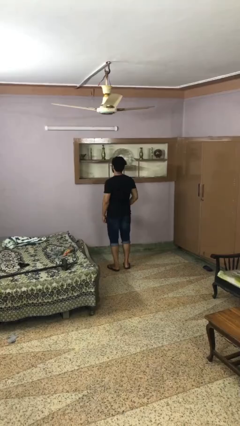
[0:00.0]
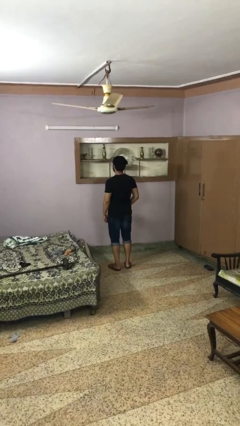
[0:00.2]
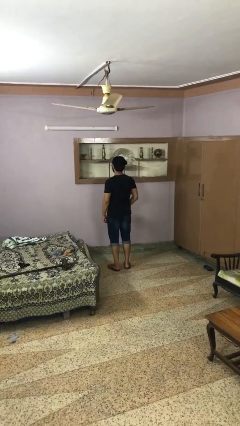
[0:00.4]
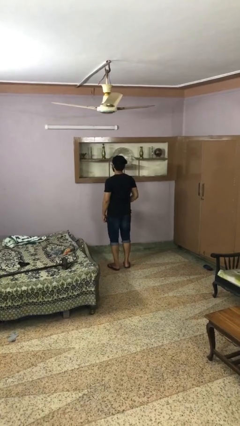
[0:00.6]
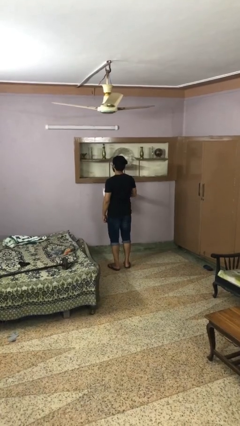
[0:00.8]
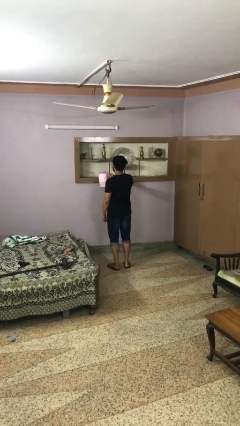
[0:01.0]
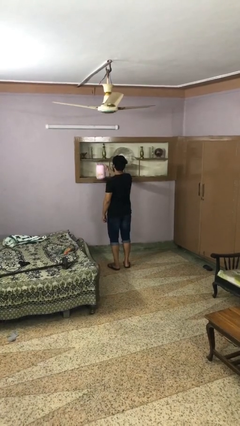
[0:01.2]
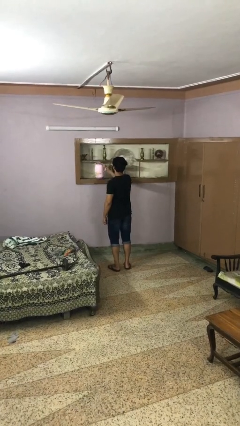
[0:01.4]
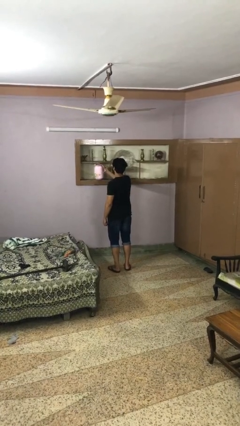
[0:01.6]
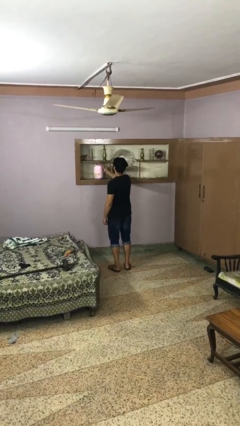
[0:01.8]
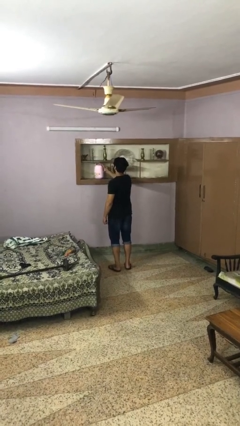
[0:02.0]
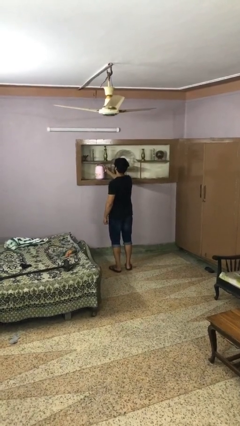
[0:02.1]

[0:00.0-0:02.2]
person puts down object on countertop

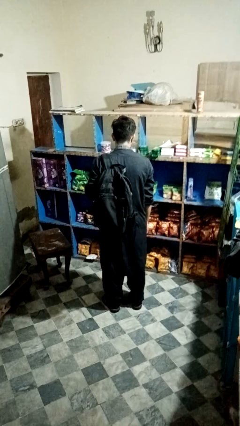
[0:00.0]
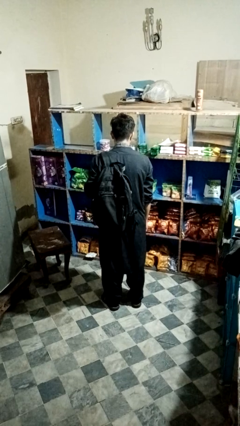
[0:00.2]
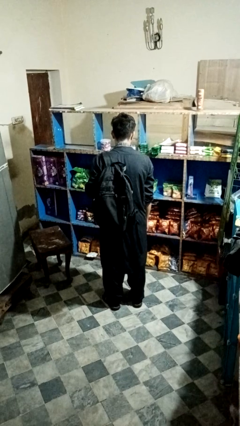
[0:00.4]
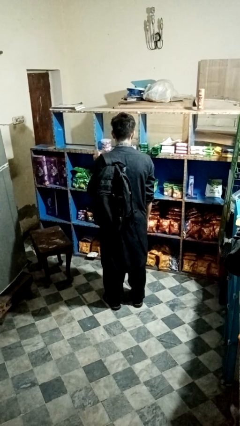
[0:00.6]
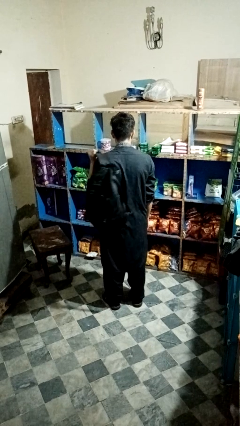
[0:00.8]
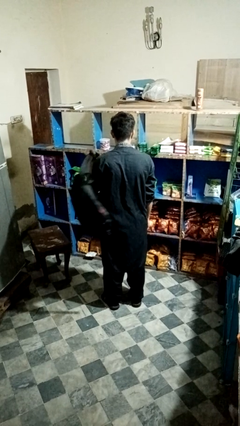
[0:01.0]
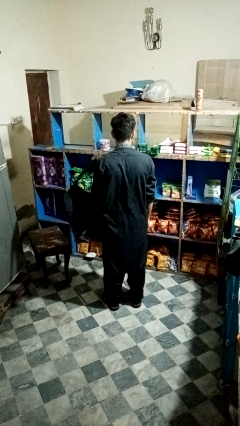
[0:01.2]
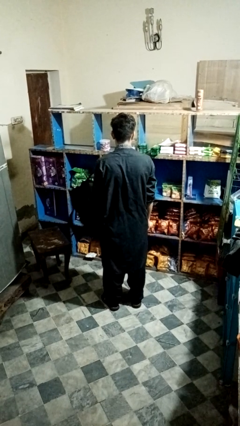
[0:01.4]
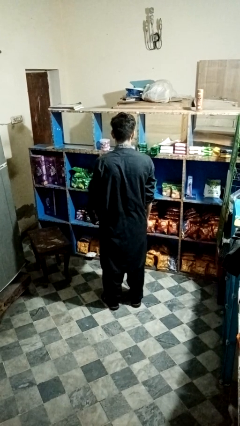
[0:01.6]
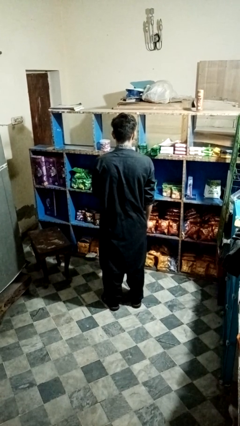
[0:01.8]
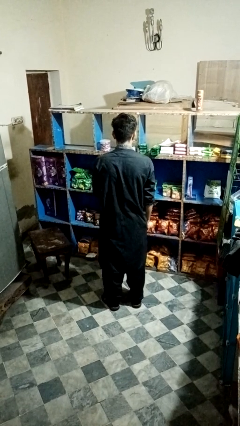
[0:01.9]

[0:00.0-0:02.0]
person takes off backpack

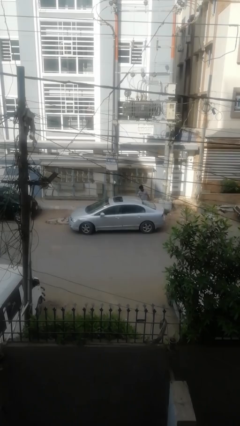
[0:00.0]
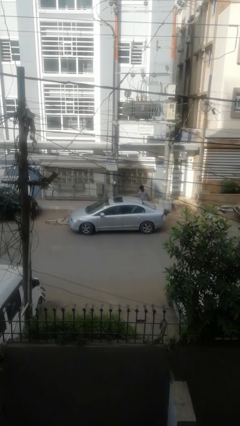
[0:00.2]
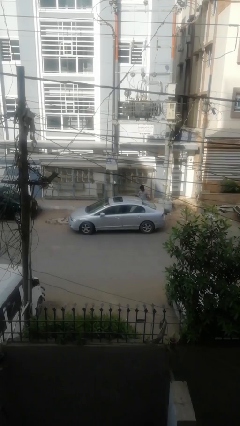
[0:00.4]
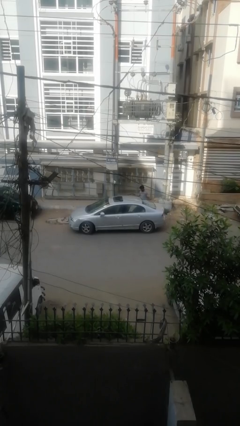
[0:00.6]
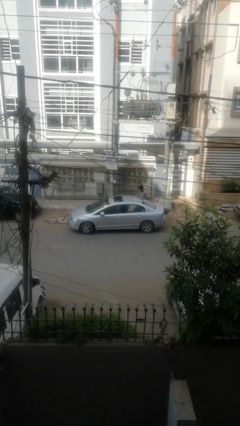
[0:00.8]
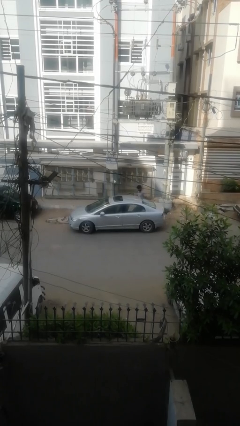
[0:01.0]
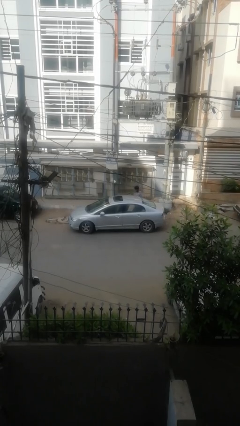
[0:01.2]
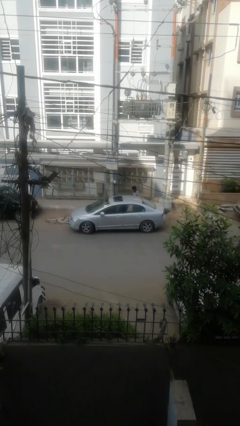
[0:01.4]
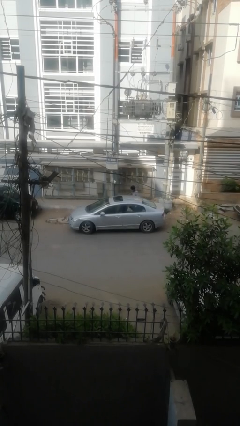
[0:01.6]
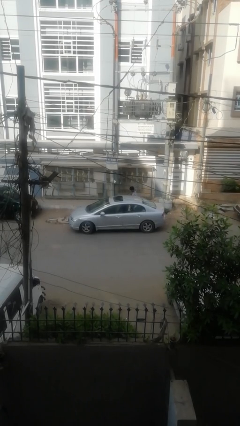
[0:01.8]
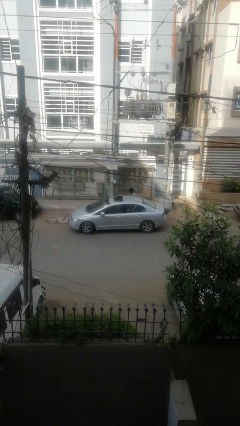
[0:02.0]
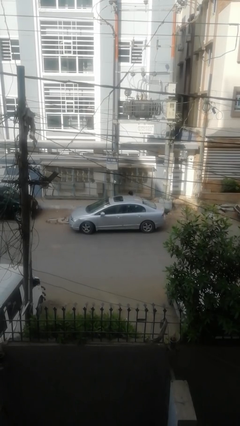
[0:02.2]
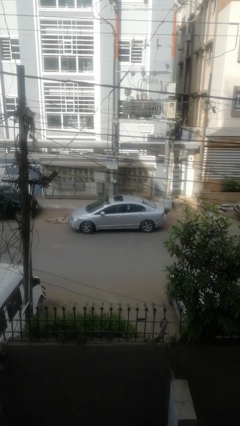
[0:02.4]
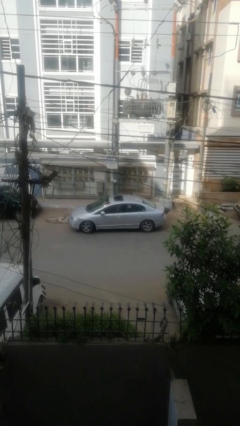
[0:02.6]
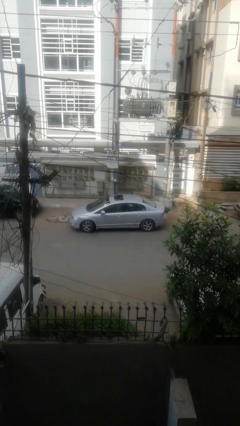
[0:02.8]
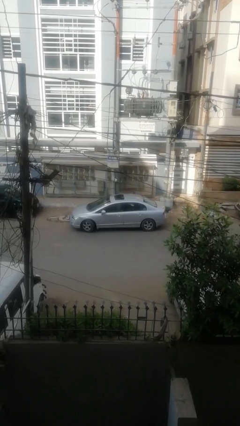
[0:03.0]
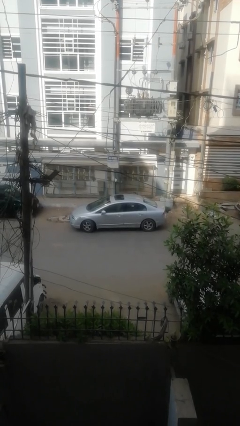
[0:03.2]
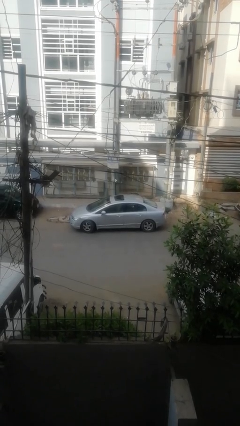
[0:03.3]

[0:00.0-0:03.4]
car picks up person

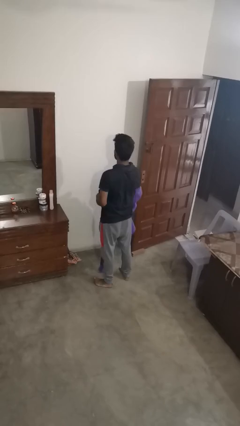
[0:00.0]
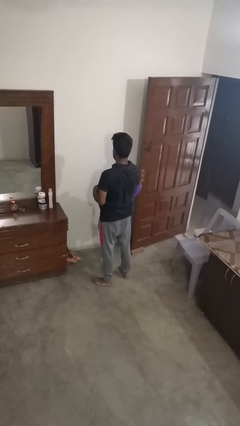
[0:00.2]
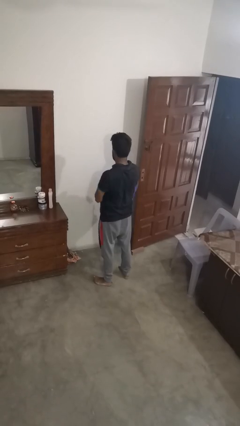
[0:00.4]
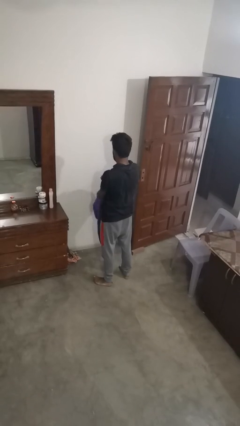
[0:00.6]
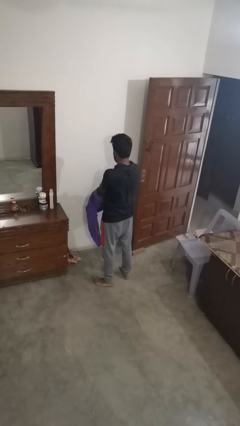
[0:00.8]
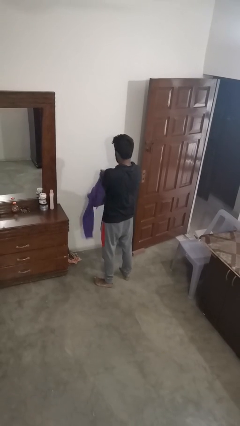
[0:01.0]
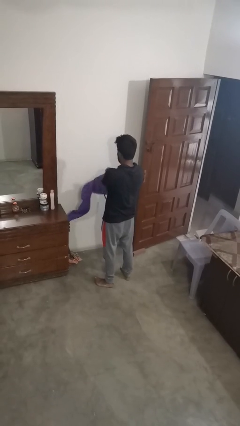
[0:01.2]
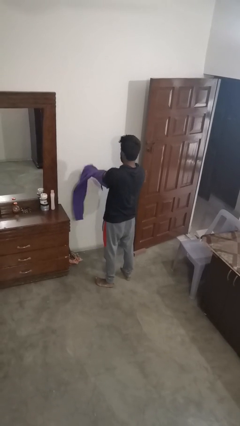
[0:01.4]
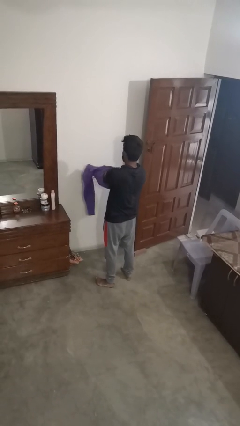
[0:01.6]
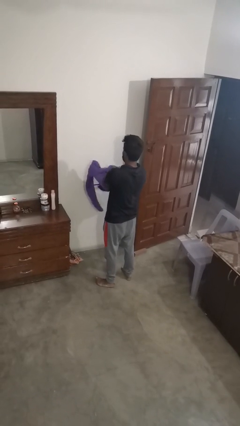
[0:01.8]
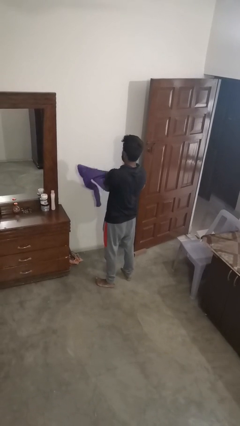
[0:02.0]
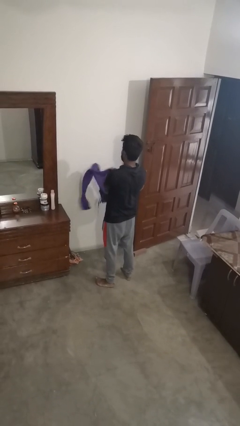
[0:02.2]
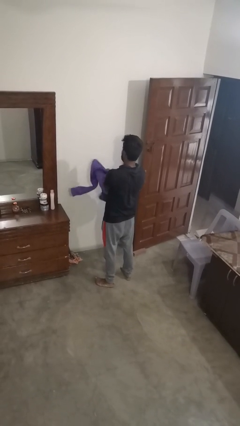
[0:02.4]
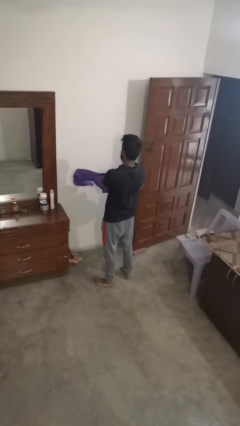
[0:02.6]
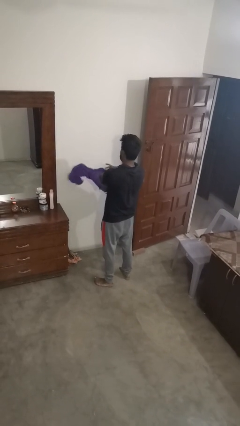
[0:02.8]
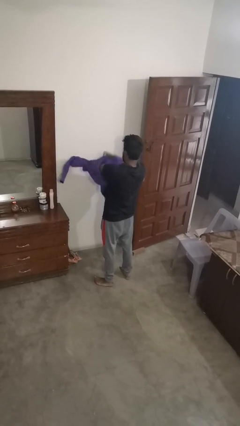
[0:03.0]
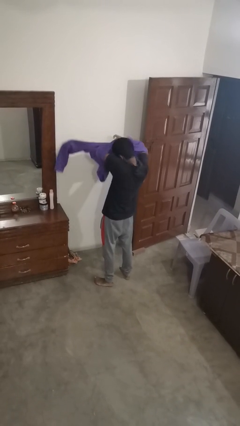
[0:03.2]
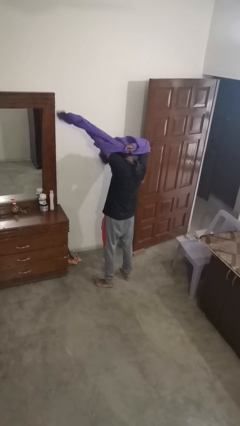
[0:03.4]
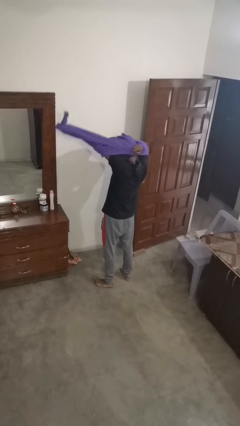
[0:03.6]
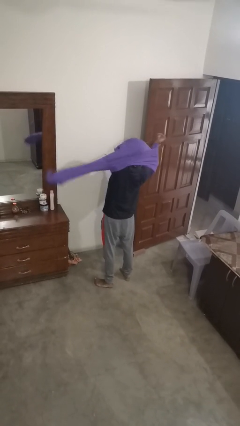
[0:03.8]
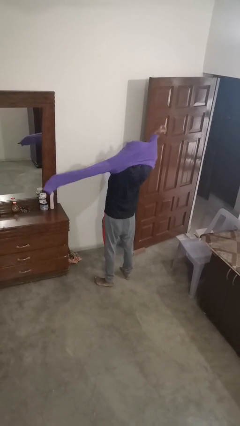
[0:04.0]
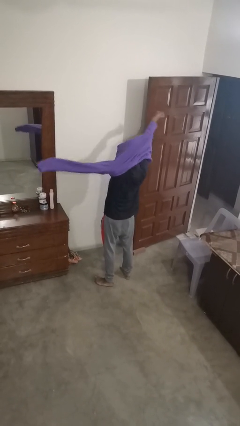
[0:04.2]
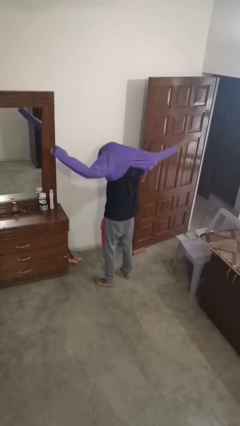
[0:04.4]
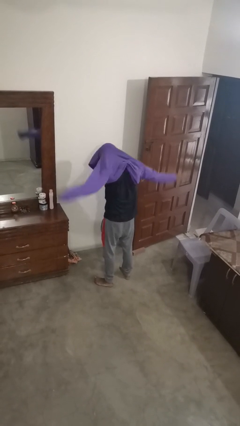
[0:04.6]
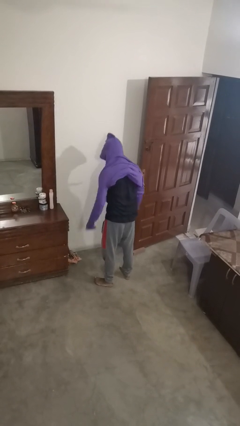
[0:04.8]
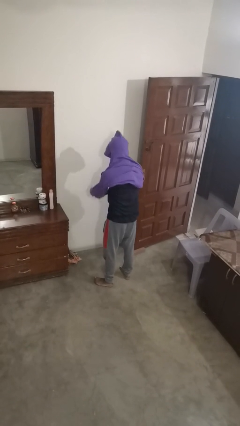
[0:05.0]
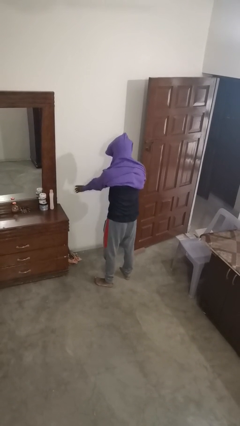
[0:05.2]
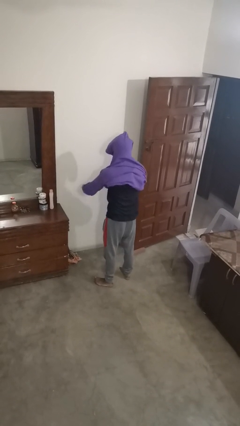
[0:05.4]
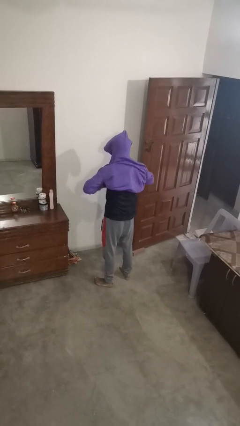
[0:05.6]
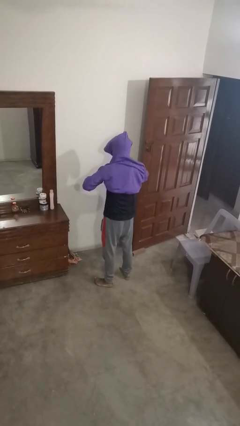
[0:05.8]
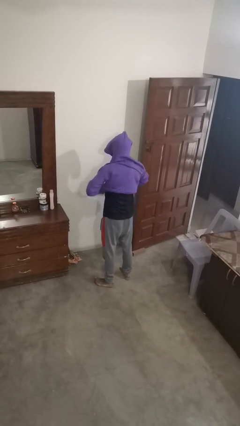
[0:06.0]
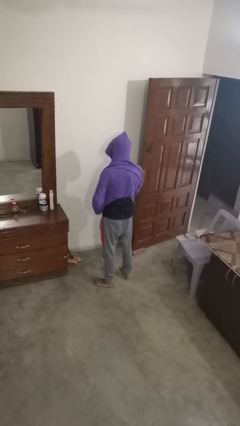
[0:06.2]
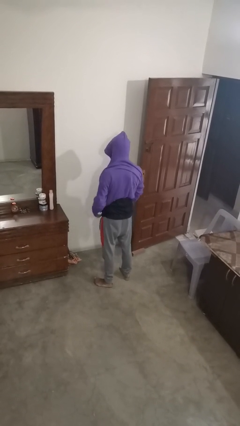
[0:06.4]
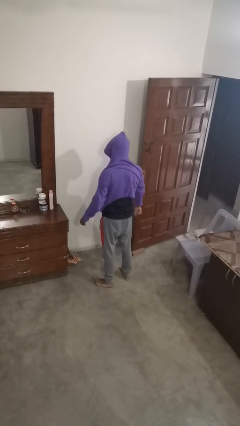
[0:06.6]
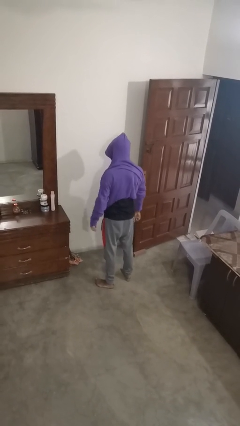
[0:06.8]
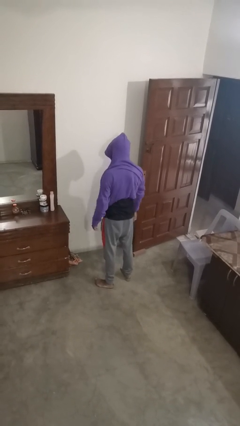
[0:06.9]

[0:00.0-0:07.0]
person puts on hoodie

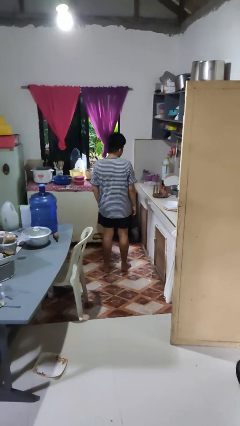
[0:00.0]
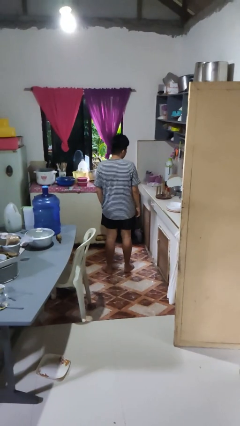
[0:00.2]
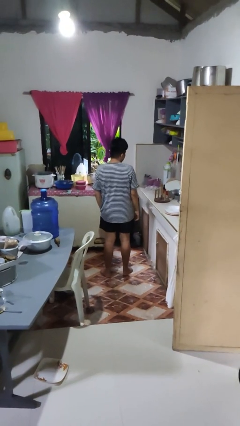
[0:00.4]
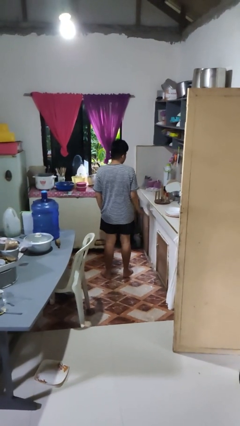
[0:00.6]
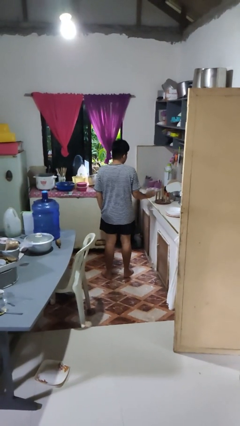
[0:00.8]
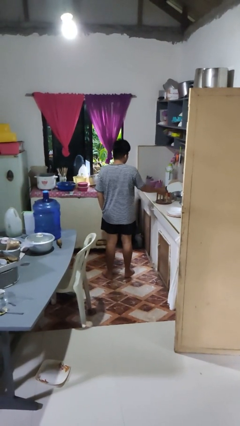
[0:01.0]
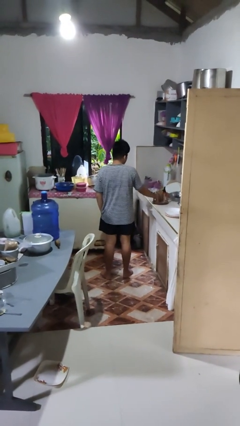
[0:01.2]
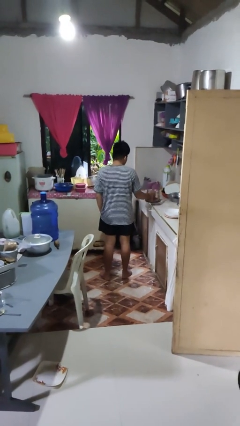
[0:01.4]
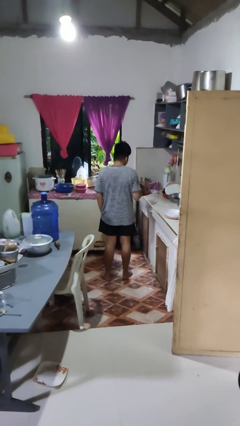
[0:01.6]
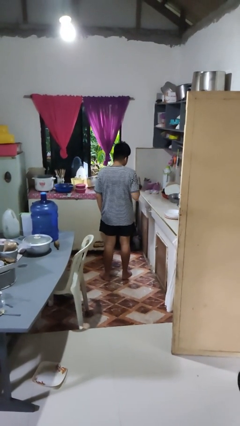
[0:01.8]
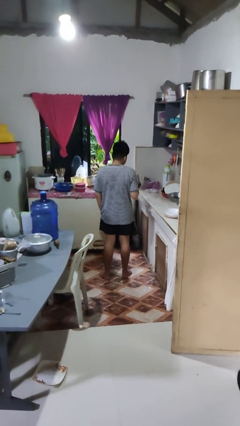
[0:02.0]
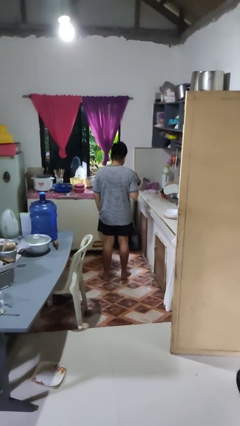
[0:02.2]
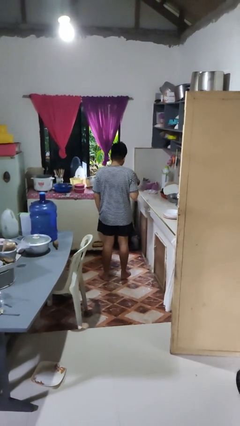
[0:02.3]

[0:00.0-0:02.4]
person picks up object from countertop

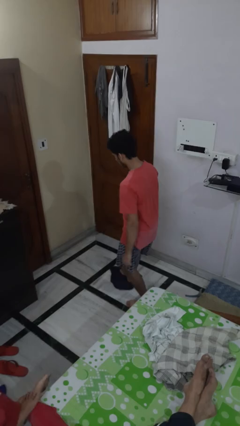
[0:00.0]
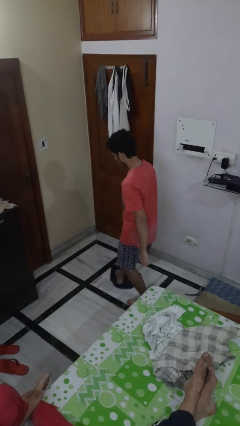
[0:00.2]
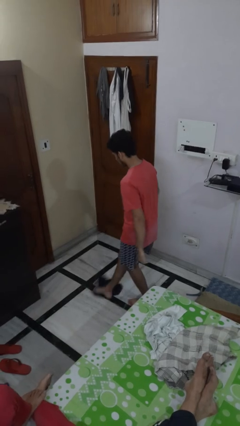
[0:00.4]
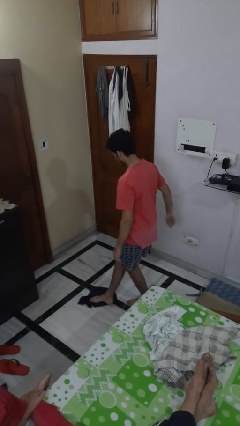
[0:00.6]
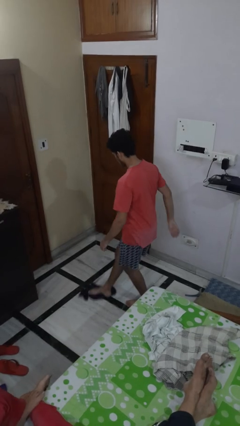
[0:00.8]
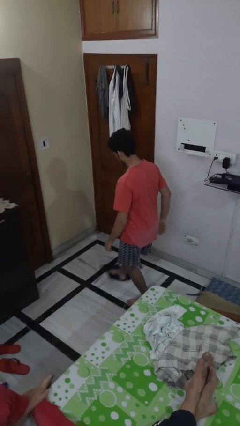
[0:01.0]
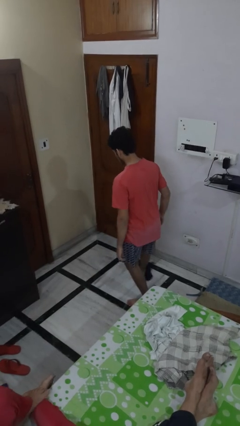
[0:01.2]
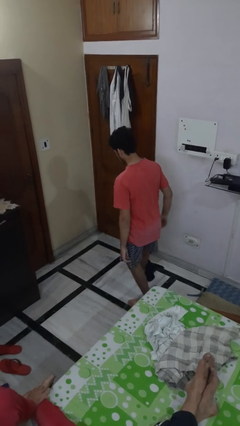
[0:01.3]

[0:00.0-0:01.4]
person mops
